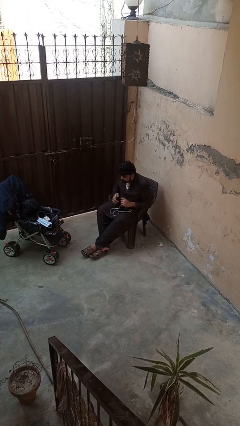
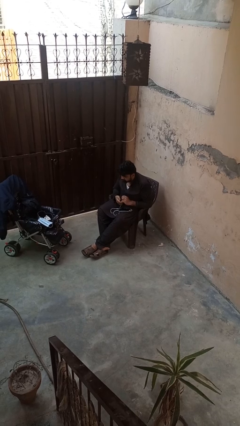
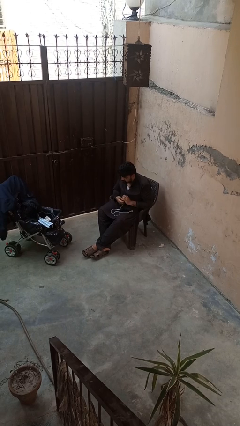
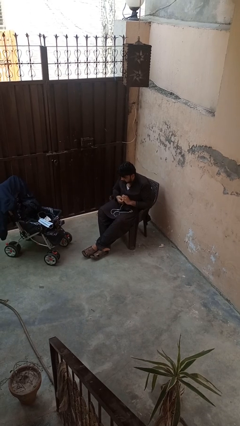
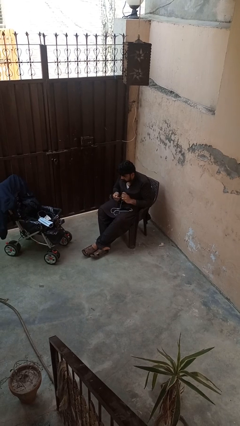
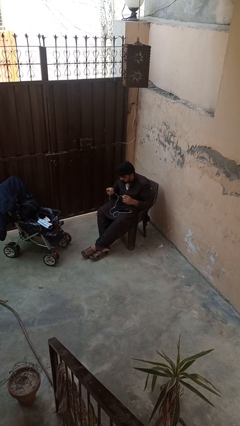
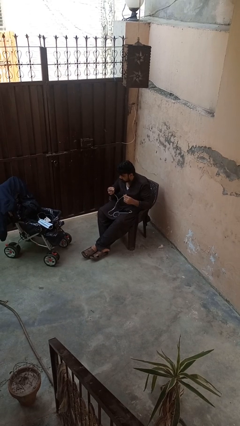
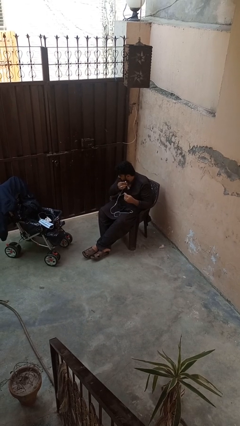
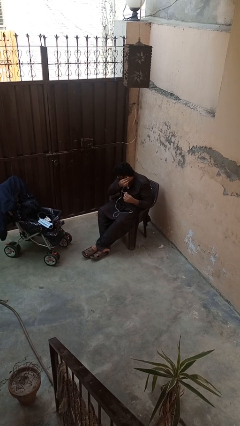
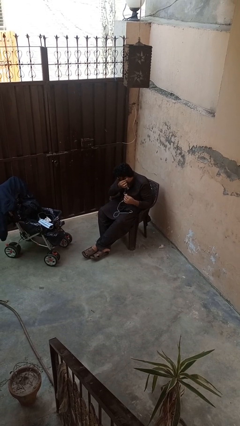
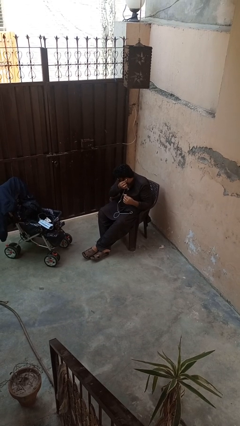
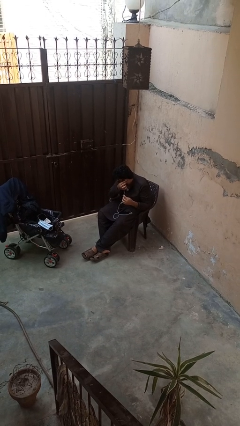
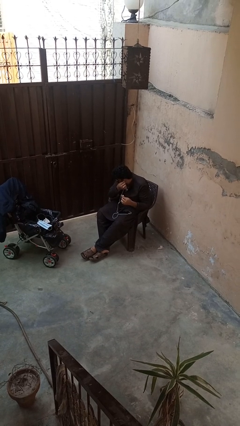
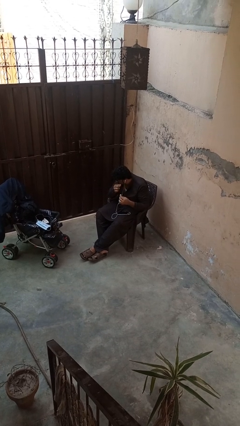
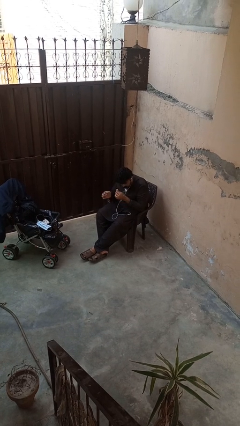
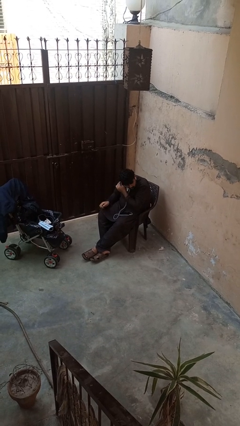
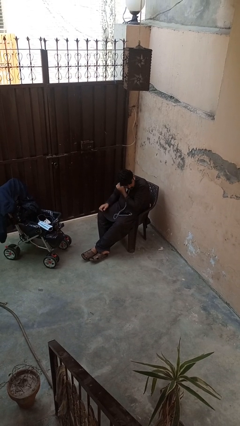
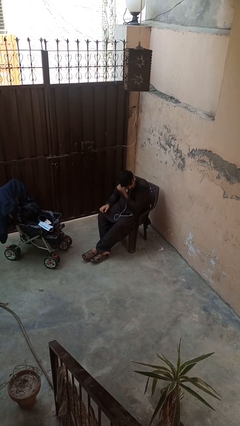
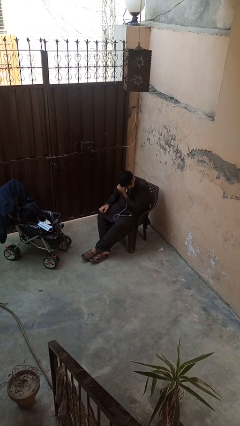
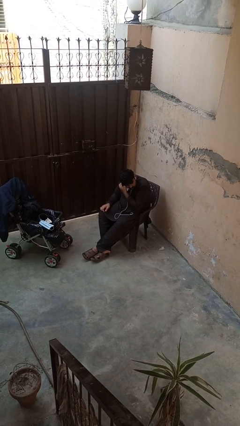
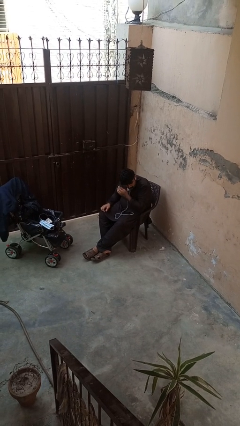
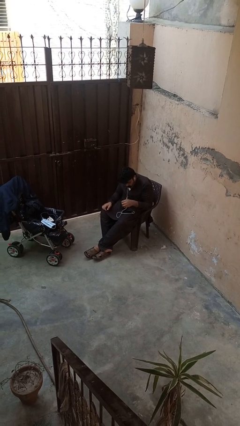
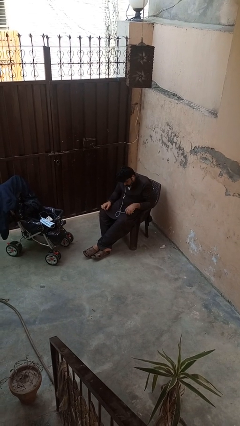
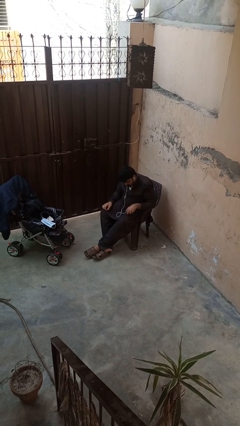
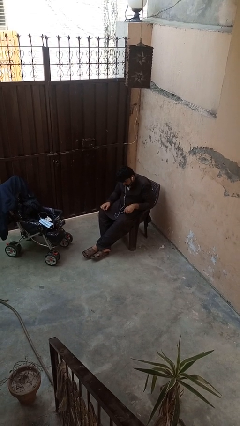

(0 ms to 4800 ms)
person puts on headphones

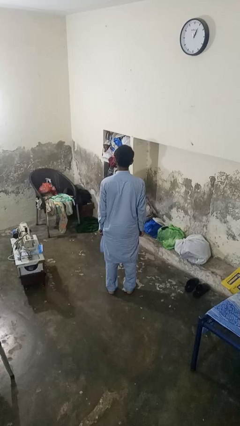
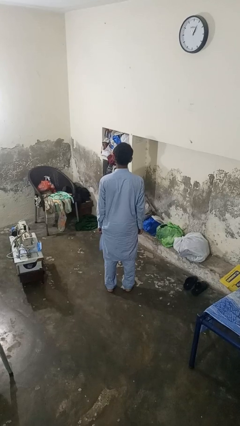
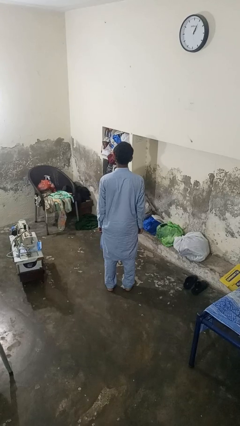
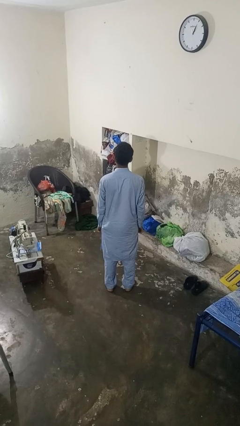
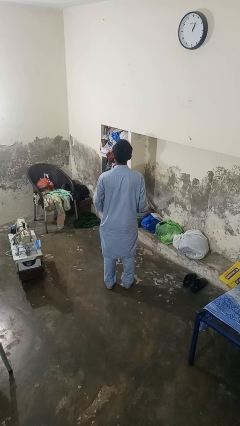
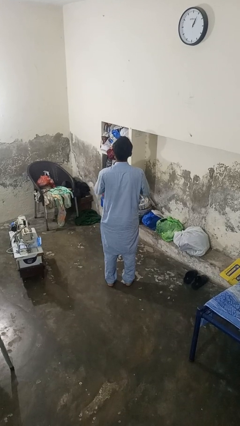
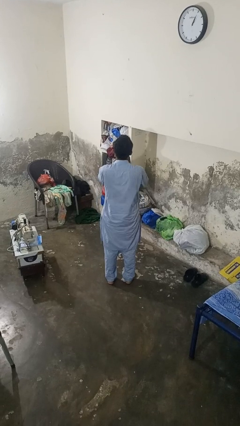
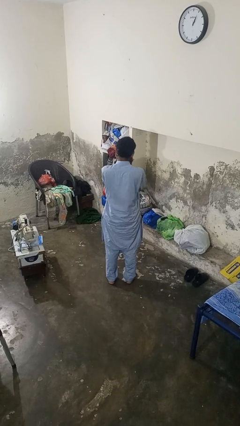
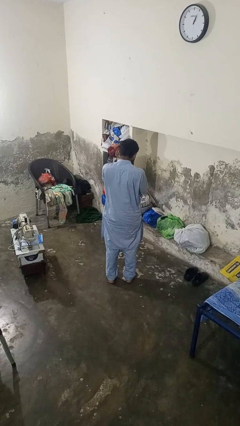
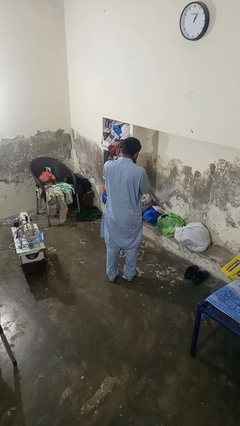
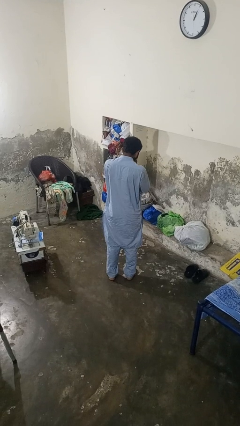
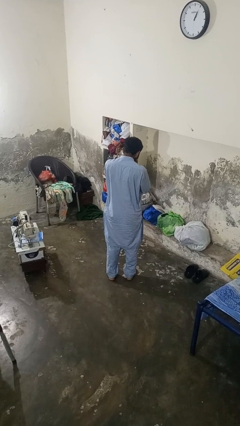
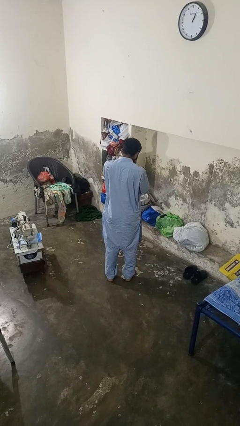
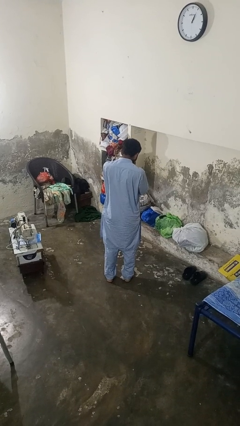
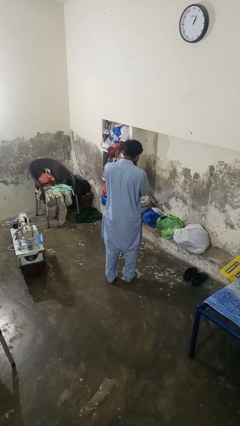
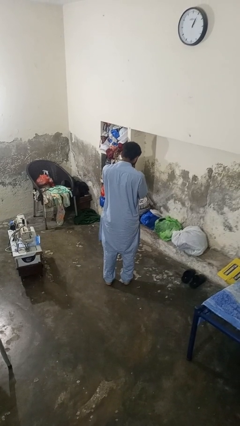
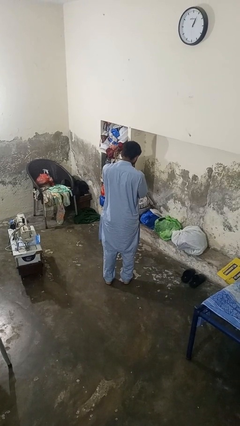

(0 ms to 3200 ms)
person sneezes into hand

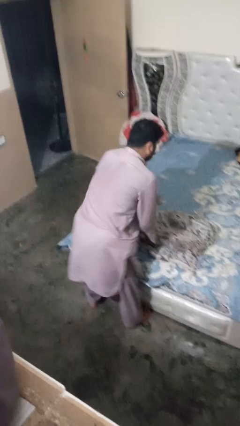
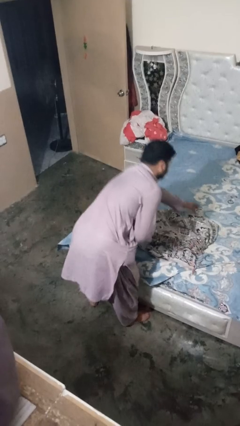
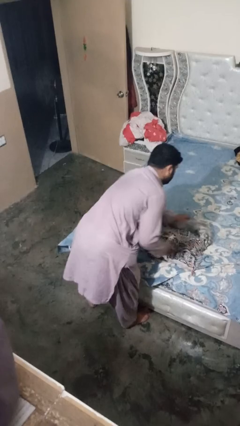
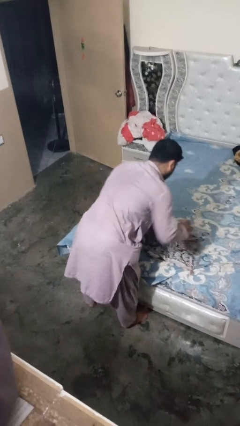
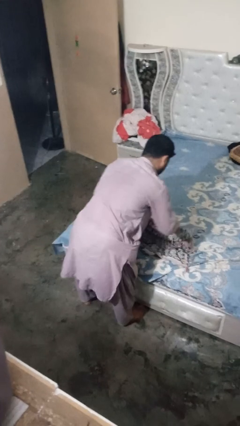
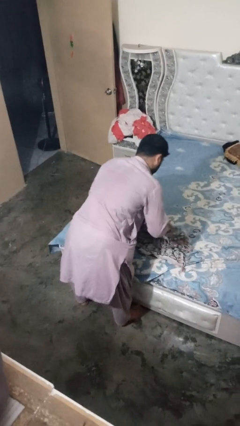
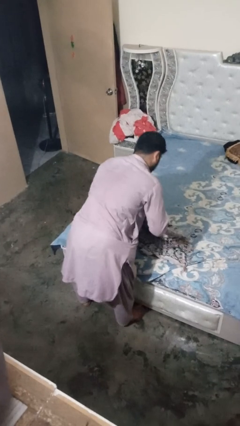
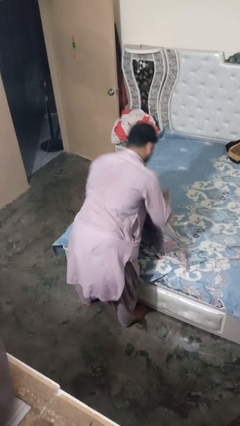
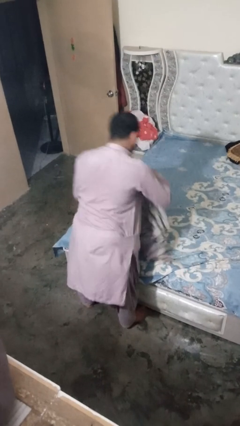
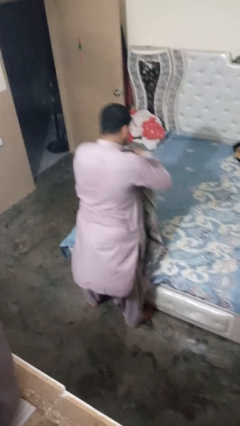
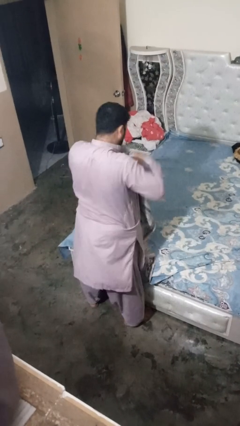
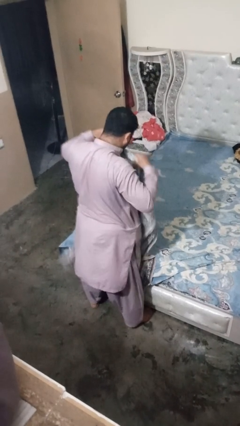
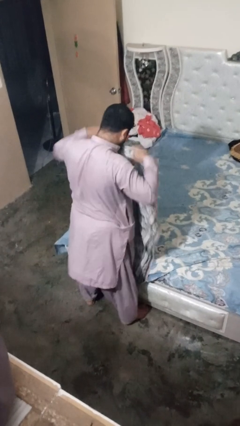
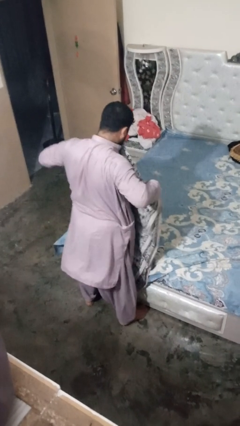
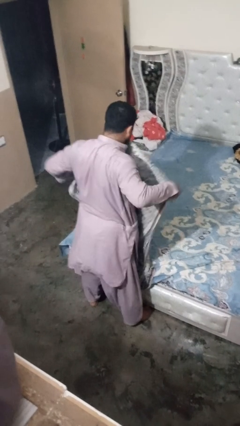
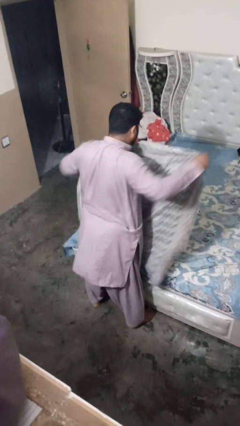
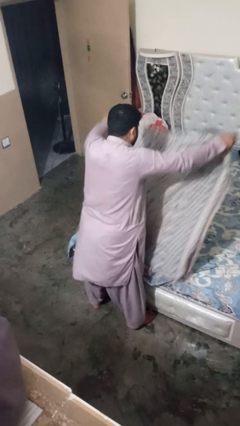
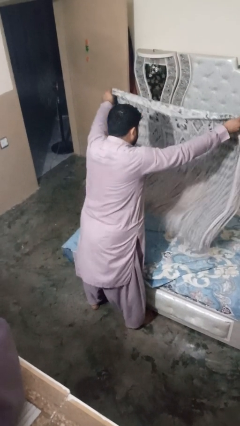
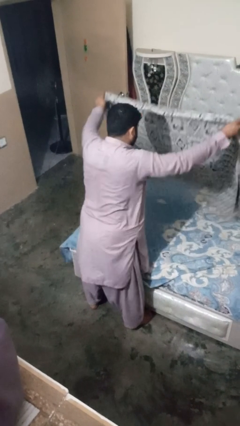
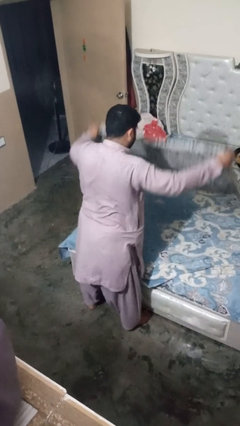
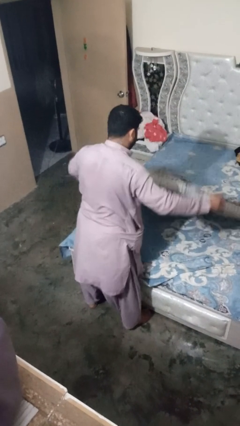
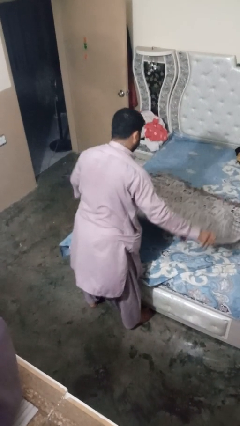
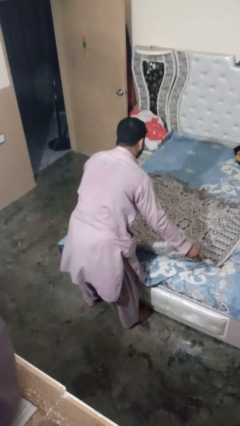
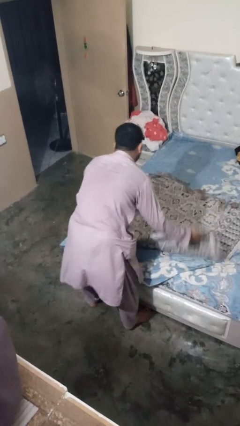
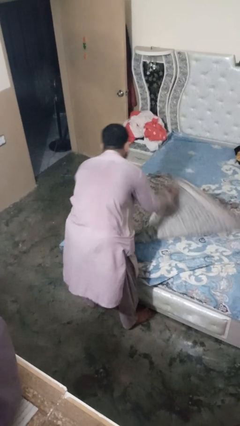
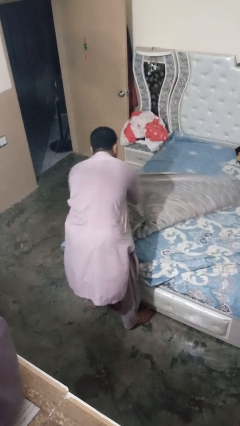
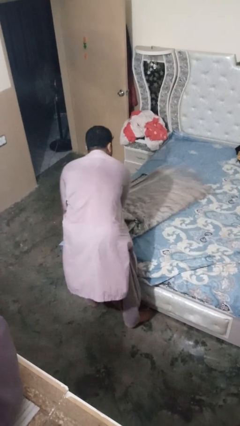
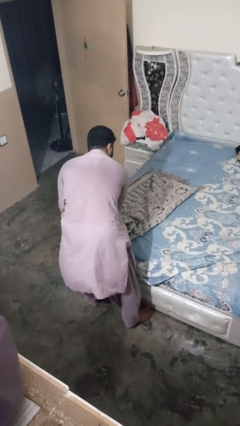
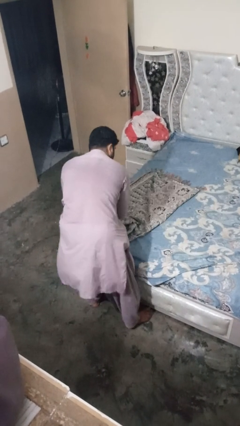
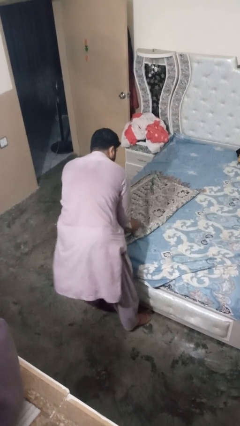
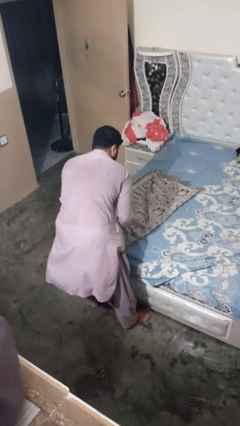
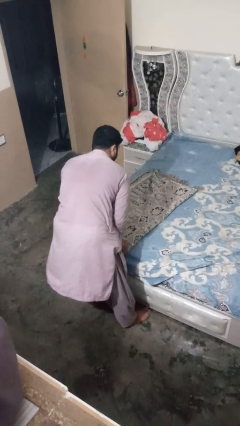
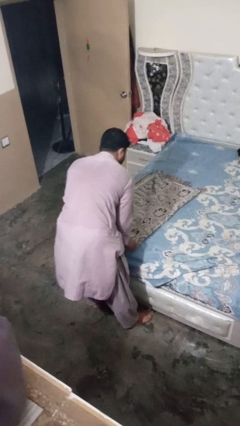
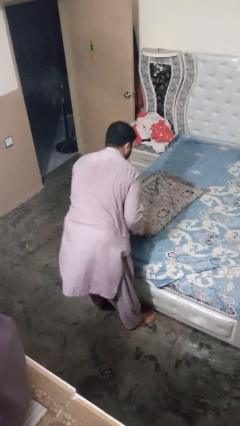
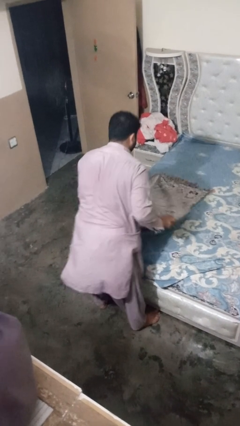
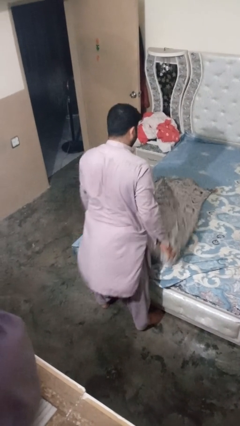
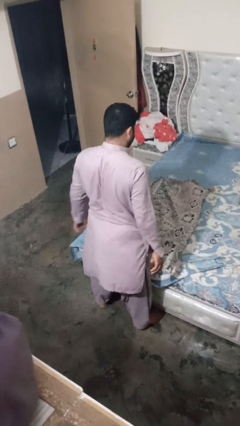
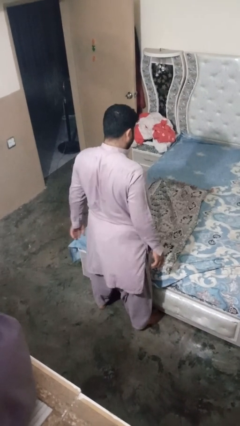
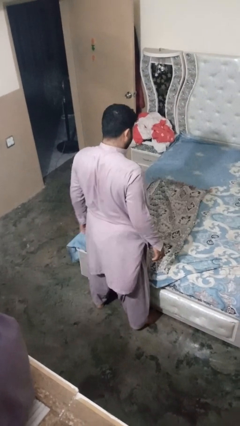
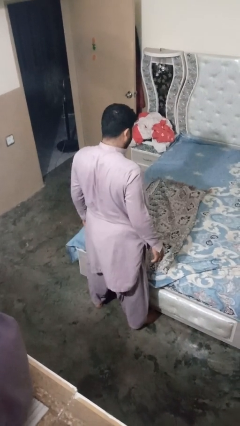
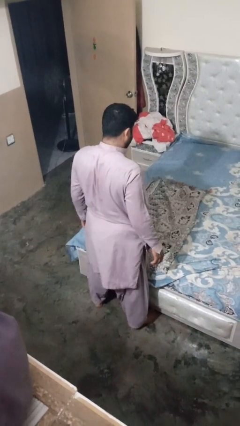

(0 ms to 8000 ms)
person folds blanket

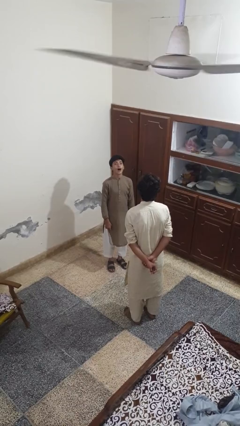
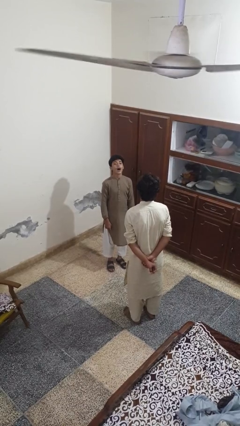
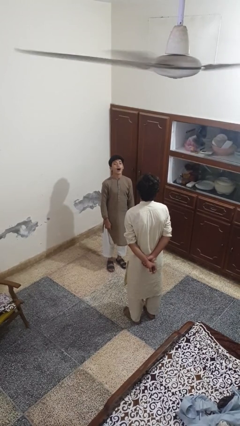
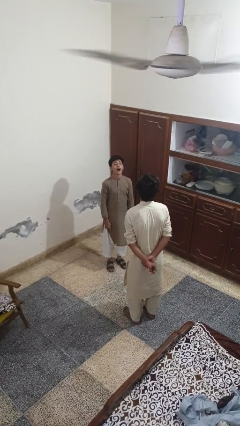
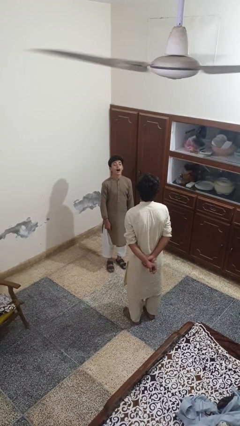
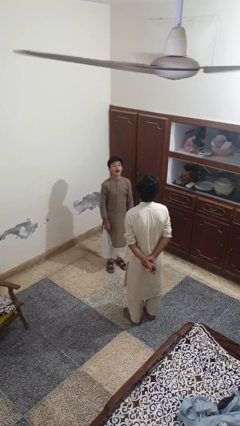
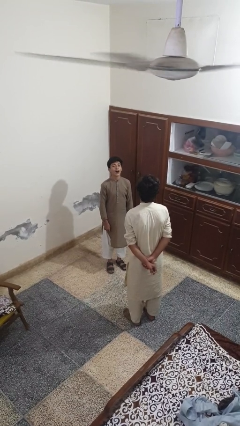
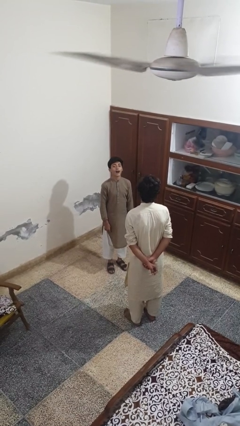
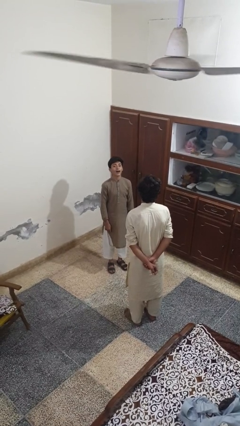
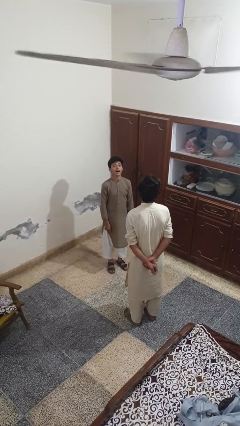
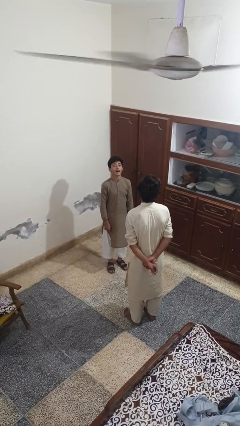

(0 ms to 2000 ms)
person laughs with person
